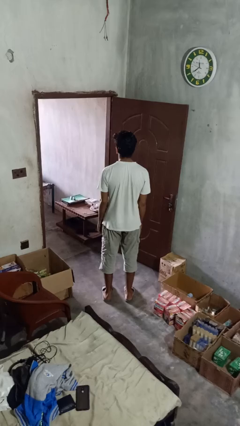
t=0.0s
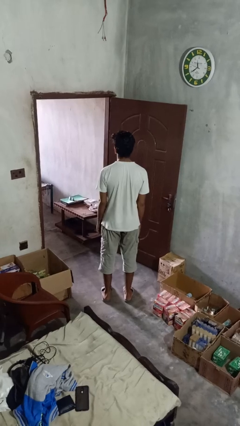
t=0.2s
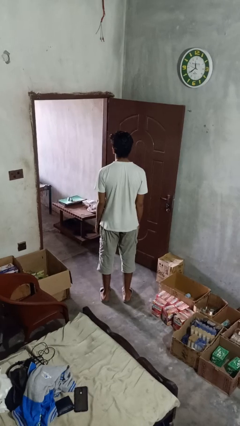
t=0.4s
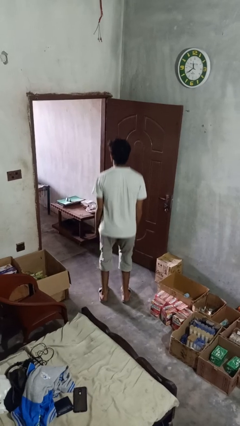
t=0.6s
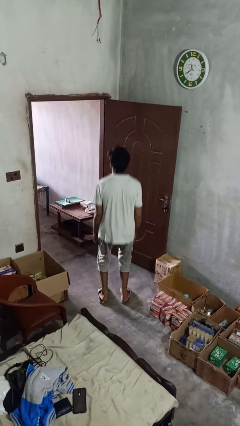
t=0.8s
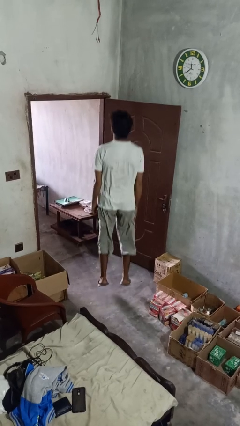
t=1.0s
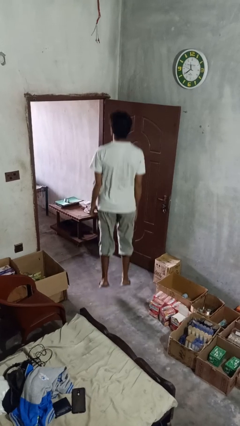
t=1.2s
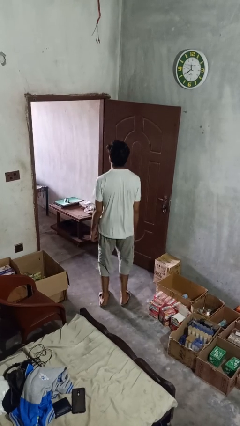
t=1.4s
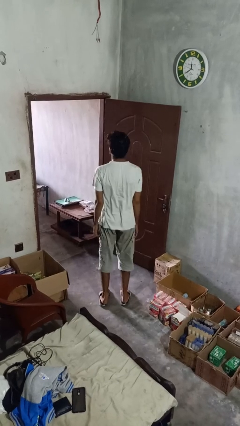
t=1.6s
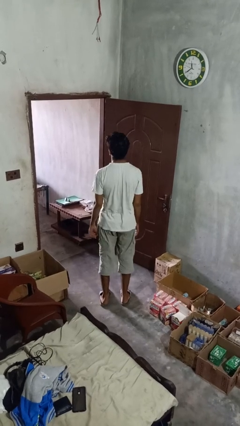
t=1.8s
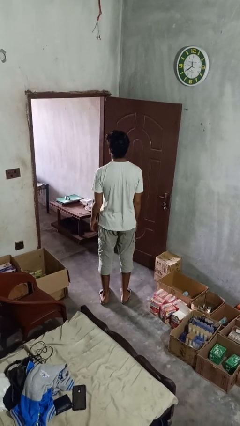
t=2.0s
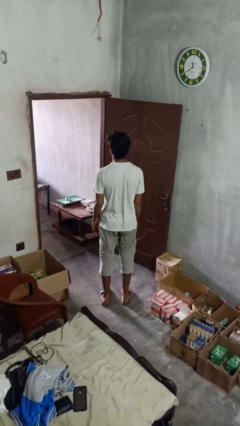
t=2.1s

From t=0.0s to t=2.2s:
person jumps

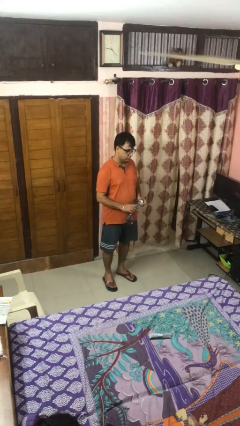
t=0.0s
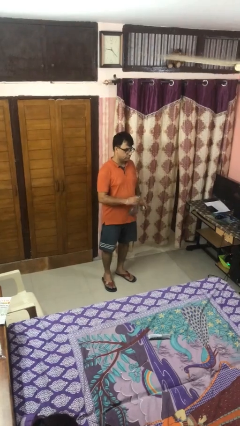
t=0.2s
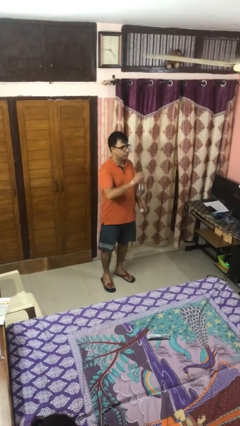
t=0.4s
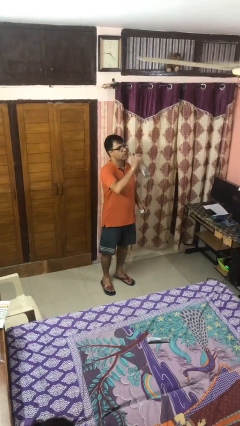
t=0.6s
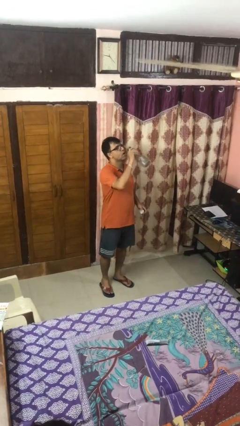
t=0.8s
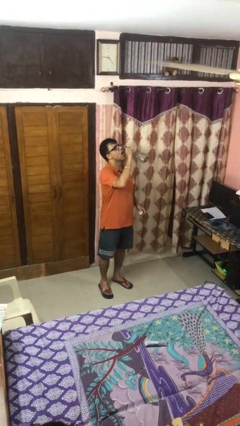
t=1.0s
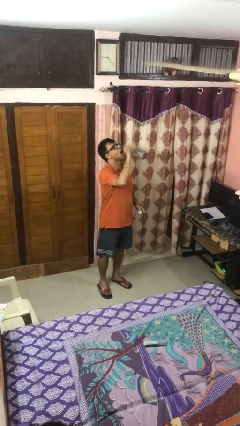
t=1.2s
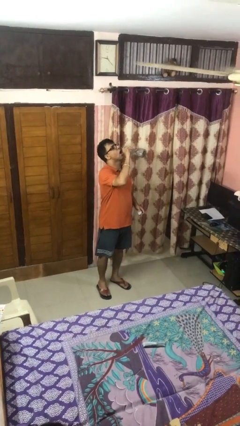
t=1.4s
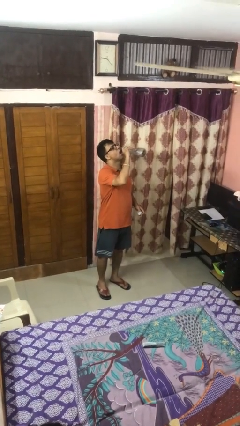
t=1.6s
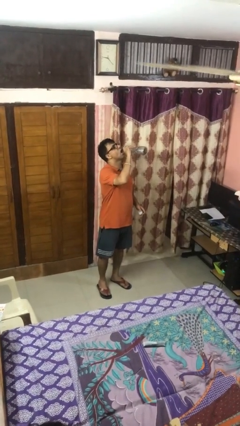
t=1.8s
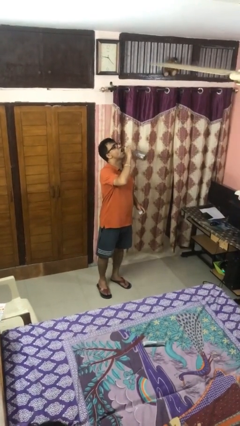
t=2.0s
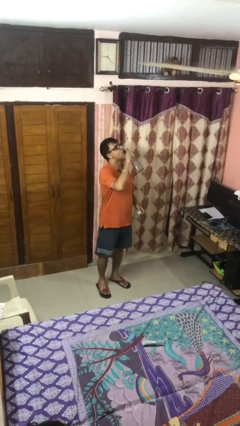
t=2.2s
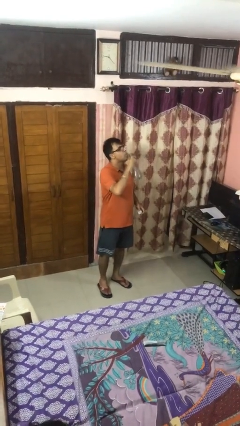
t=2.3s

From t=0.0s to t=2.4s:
person drinks from bottle

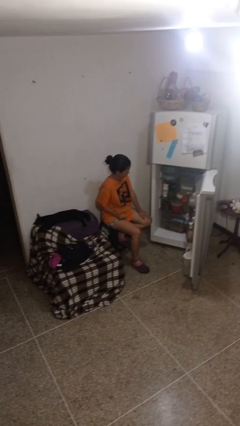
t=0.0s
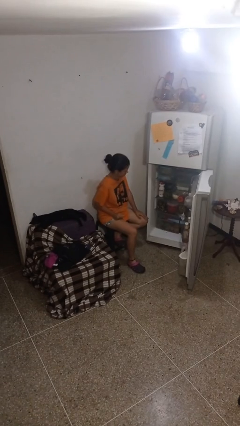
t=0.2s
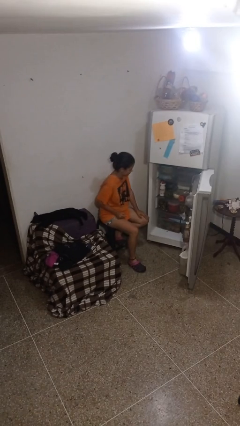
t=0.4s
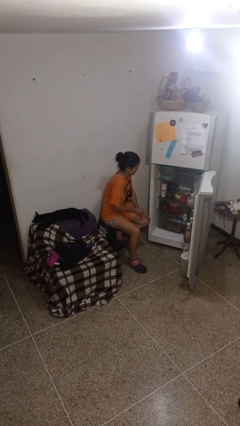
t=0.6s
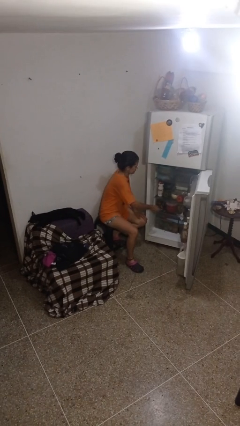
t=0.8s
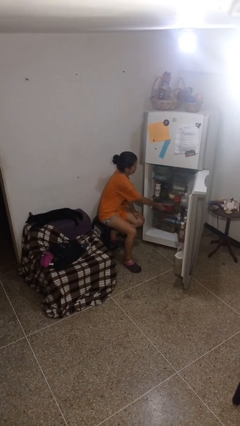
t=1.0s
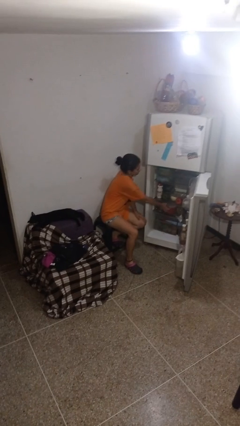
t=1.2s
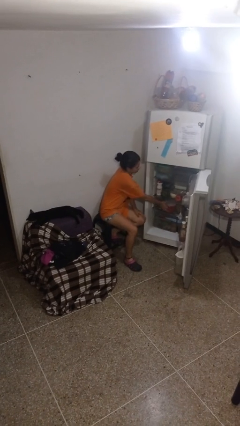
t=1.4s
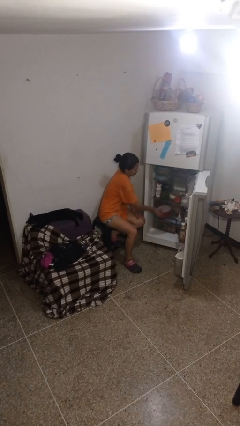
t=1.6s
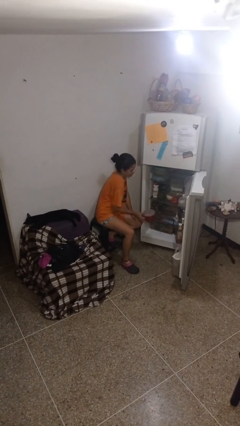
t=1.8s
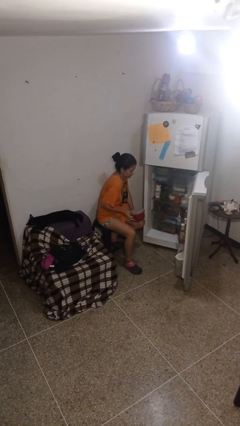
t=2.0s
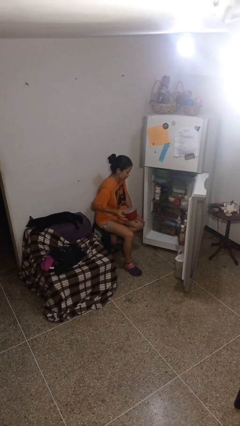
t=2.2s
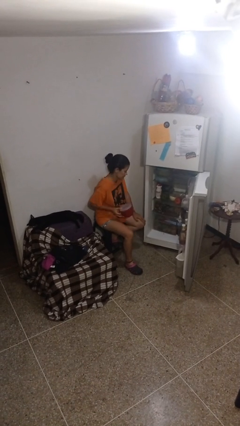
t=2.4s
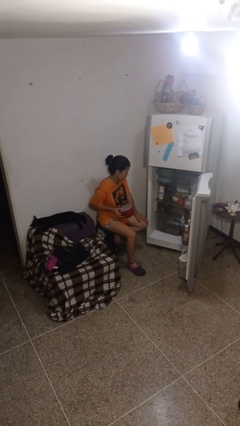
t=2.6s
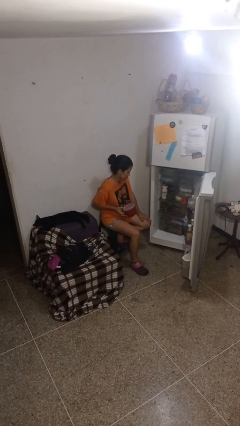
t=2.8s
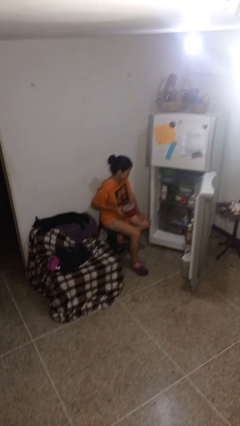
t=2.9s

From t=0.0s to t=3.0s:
person takes object from refrigerator

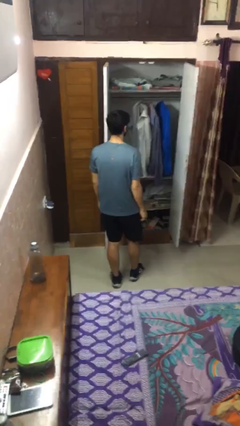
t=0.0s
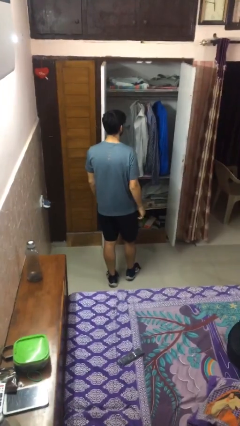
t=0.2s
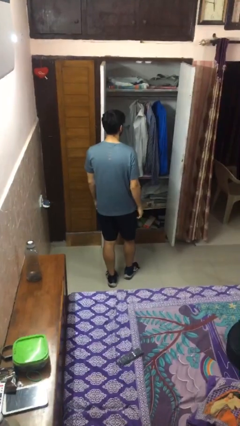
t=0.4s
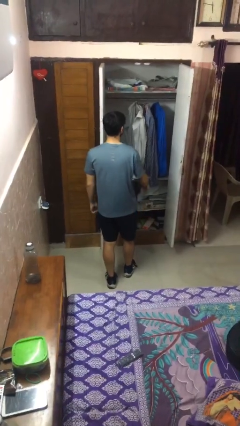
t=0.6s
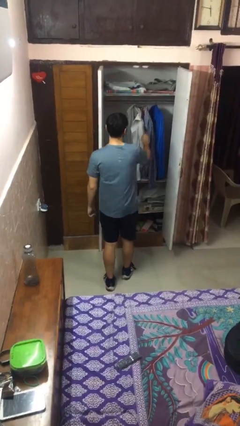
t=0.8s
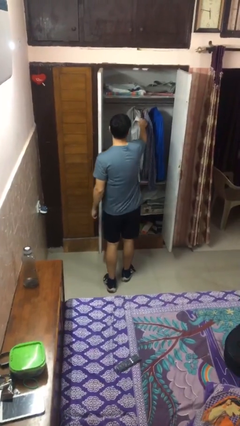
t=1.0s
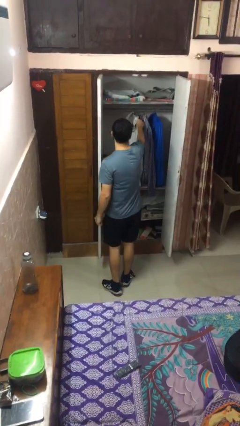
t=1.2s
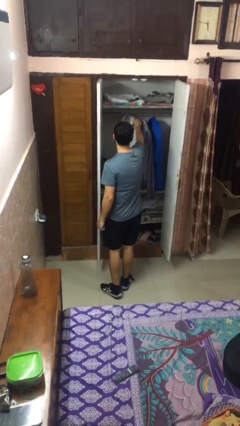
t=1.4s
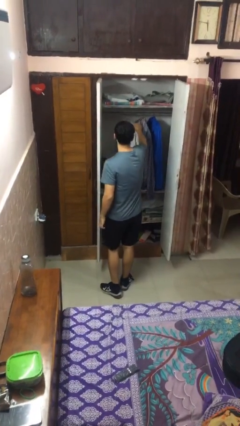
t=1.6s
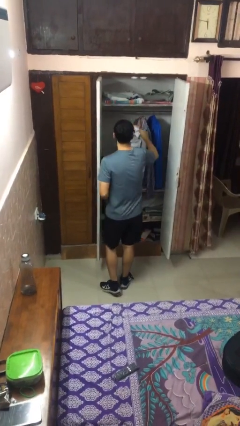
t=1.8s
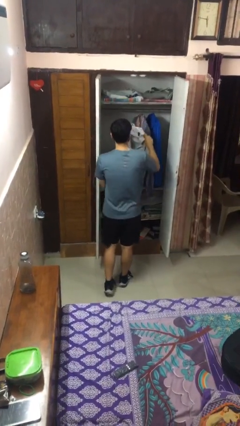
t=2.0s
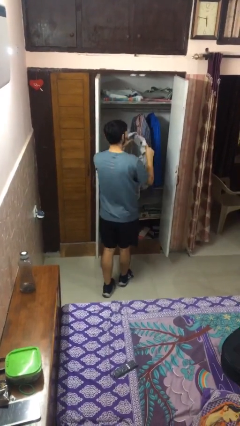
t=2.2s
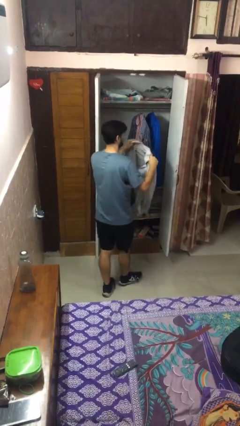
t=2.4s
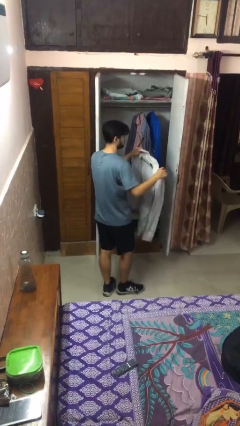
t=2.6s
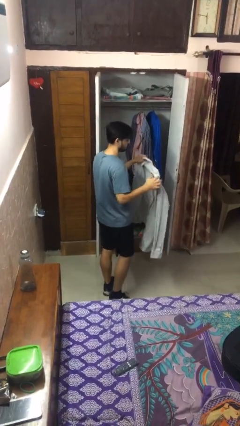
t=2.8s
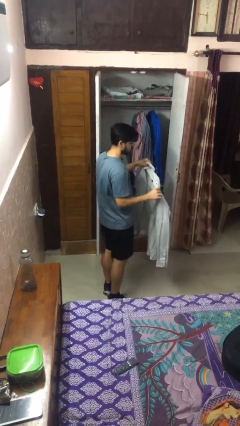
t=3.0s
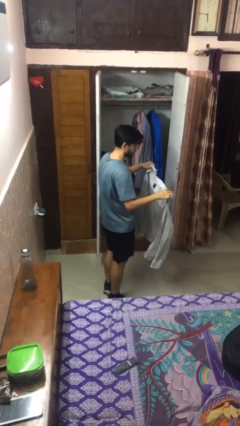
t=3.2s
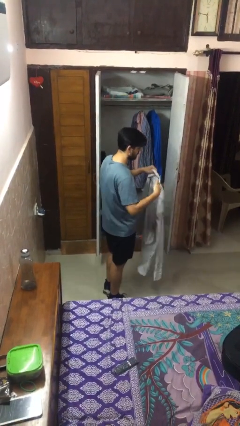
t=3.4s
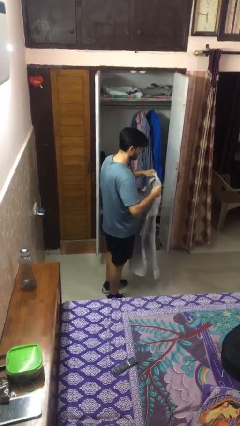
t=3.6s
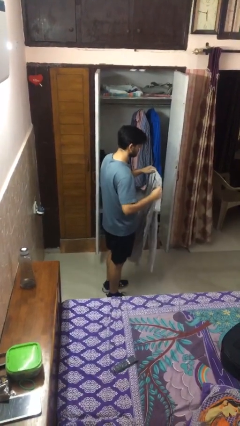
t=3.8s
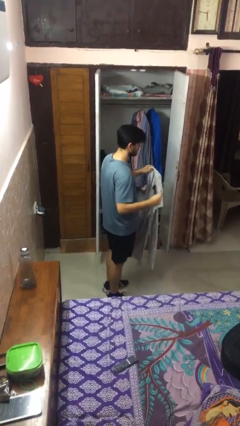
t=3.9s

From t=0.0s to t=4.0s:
person takes clothes from closet

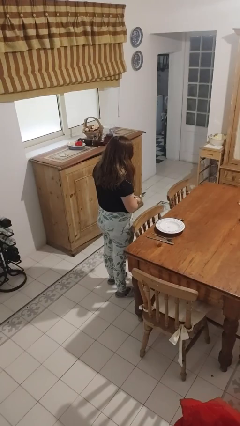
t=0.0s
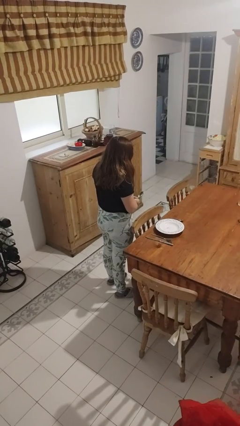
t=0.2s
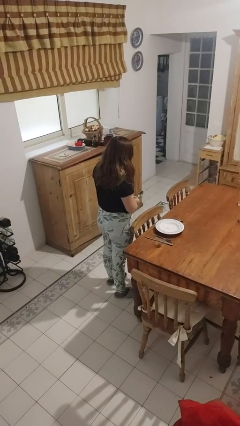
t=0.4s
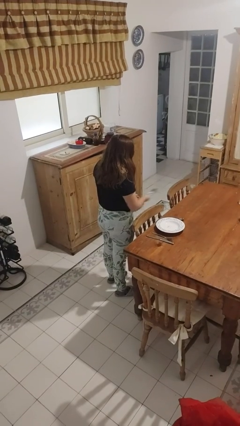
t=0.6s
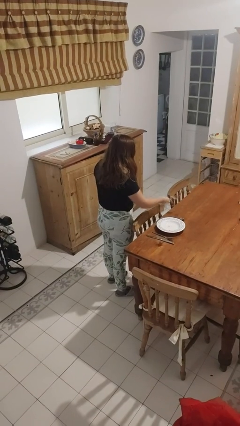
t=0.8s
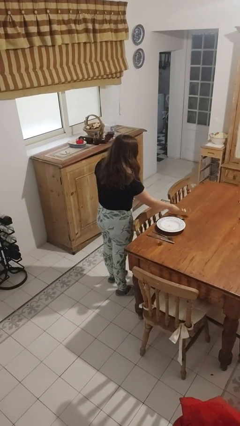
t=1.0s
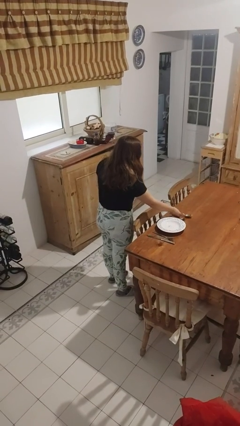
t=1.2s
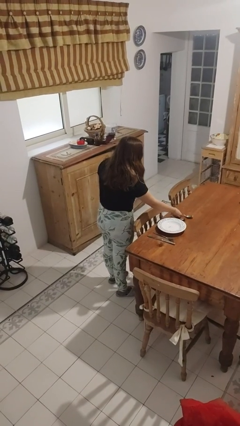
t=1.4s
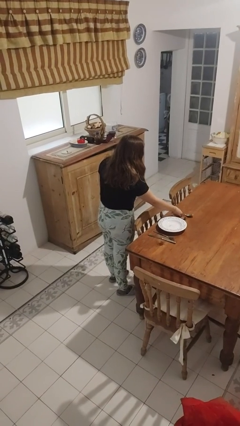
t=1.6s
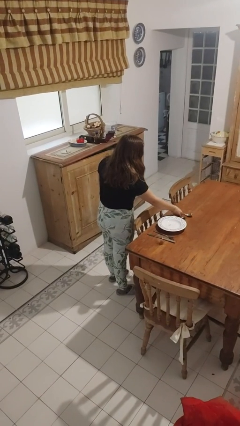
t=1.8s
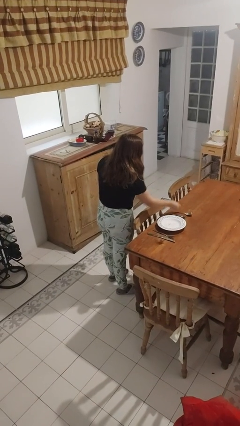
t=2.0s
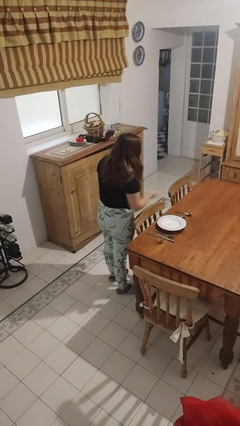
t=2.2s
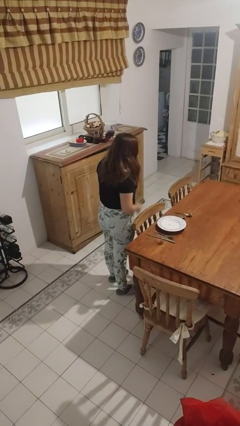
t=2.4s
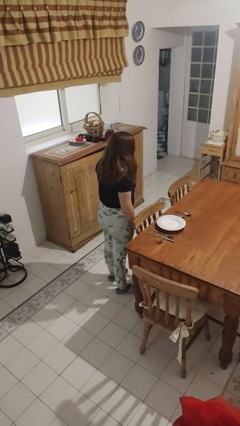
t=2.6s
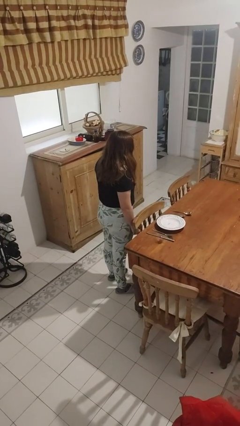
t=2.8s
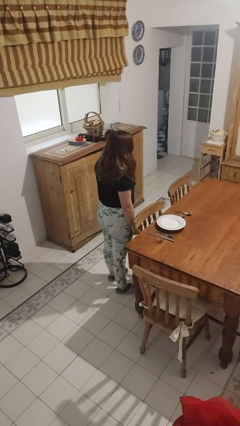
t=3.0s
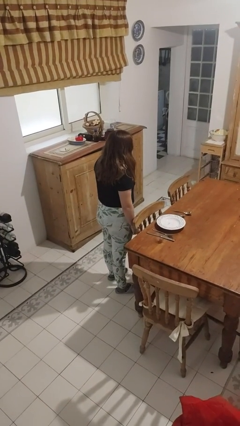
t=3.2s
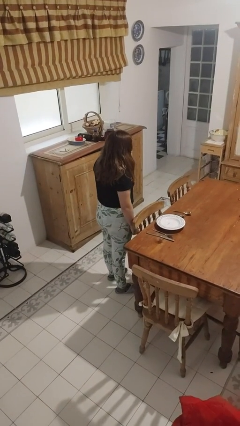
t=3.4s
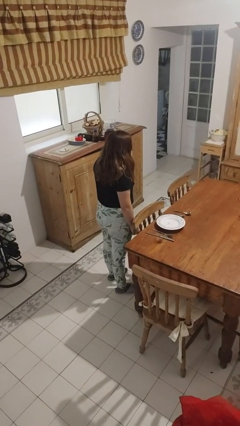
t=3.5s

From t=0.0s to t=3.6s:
person sets table

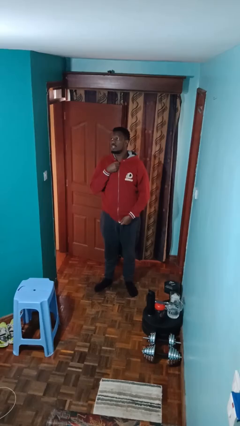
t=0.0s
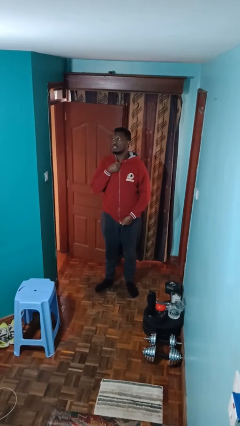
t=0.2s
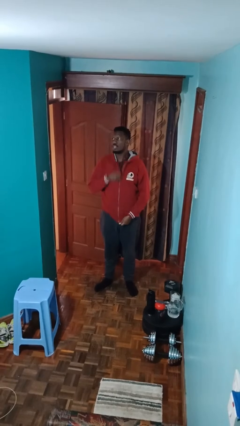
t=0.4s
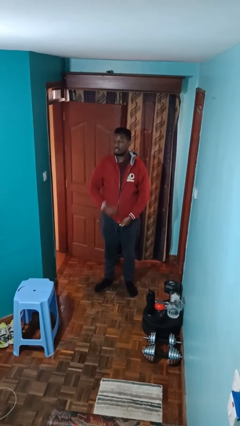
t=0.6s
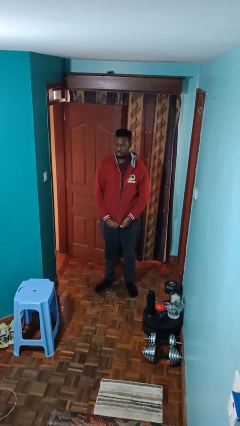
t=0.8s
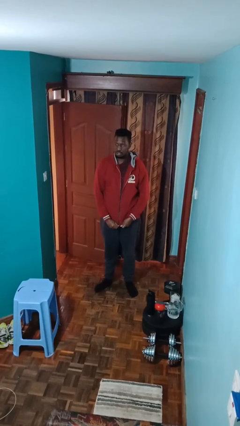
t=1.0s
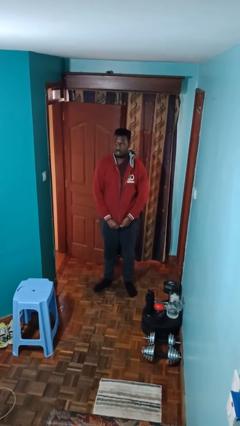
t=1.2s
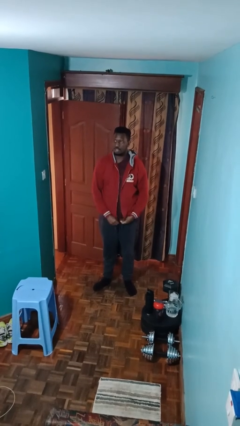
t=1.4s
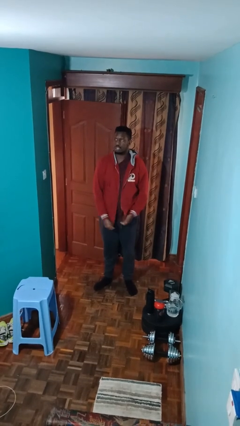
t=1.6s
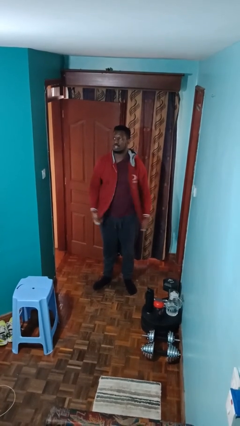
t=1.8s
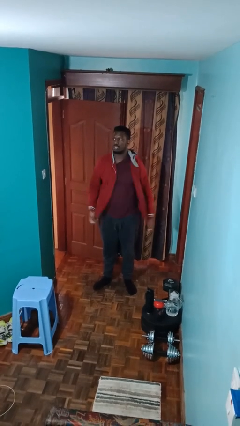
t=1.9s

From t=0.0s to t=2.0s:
person unzips jacket
